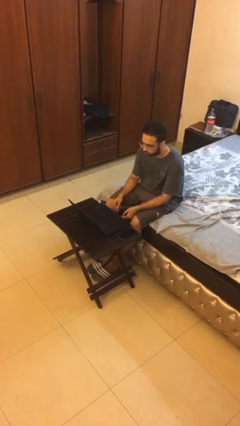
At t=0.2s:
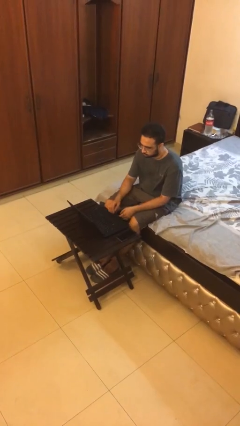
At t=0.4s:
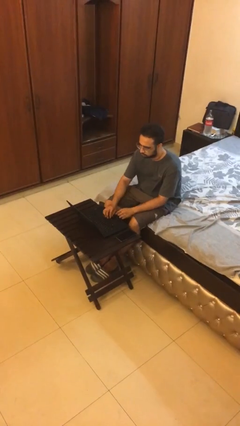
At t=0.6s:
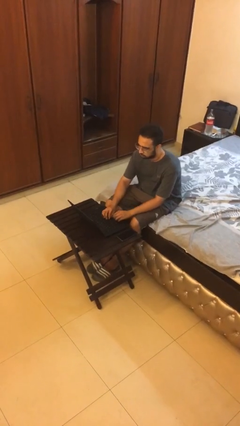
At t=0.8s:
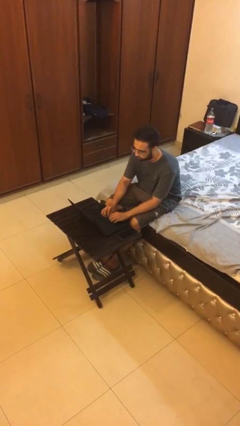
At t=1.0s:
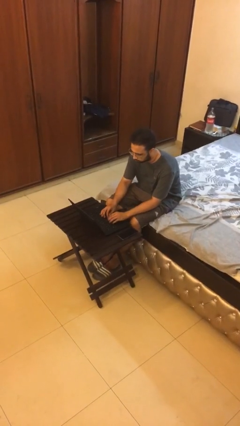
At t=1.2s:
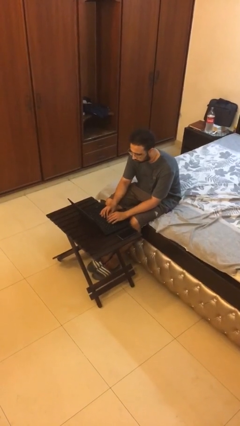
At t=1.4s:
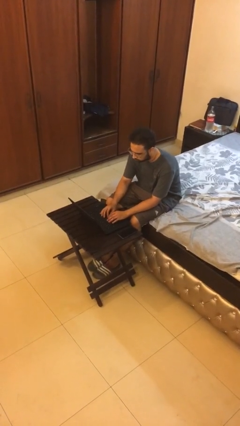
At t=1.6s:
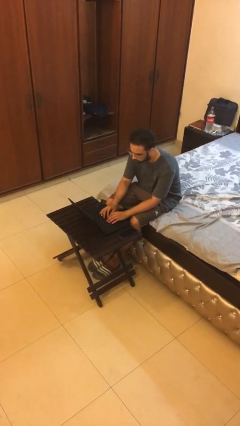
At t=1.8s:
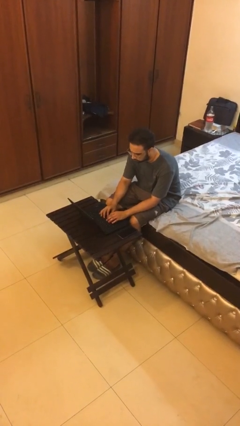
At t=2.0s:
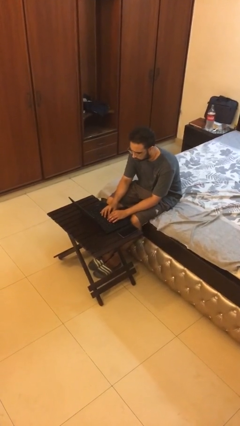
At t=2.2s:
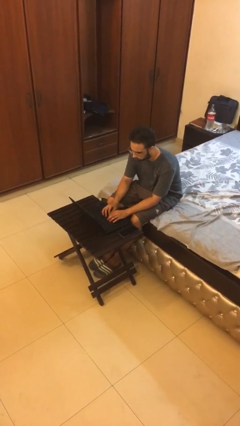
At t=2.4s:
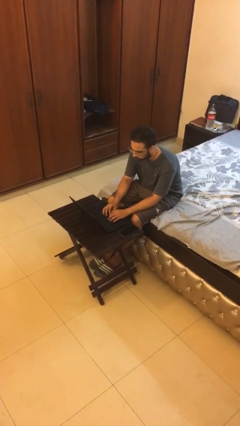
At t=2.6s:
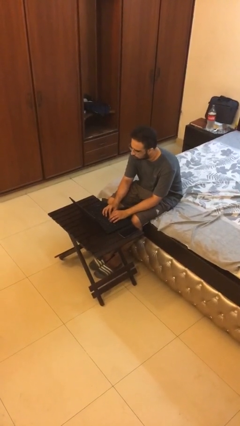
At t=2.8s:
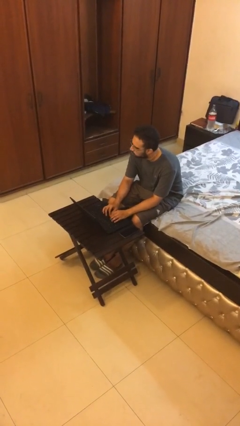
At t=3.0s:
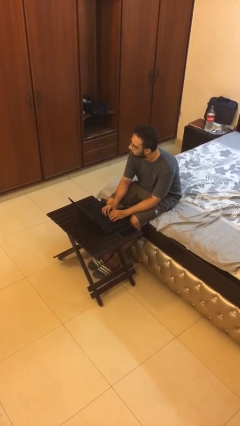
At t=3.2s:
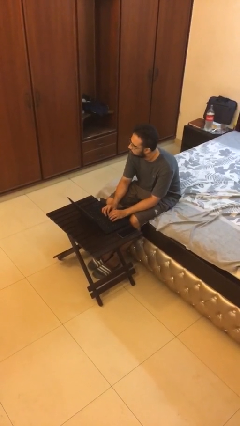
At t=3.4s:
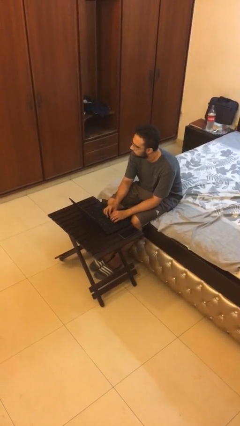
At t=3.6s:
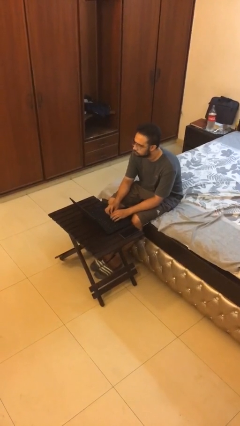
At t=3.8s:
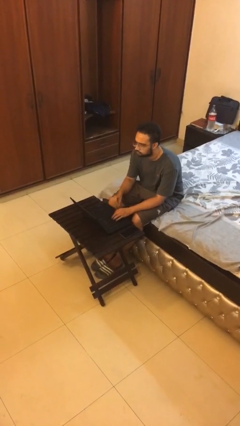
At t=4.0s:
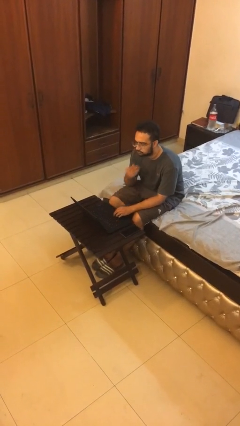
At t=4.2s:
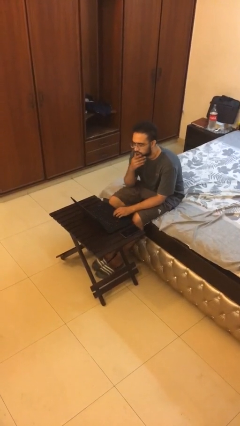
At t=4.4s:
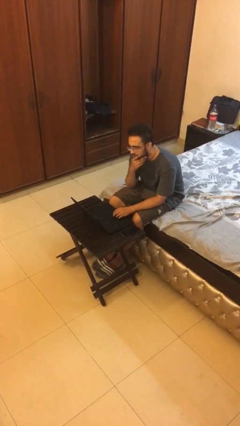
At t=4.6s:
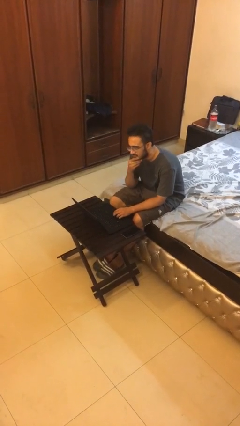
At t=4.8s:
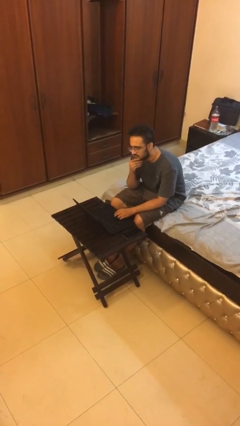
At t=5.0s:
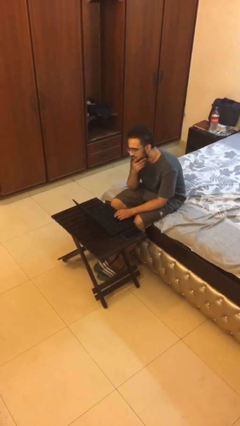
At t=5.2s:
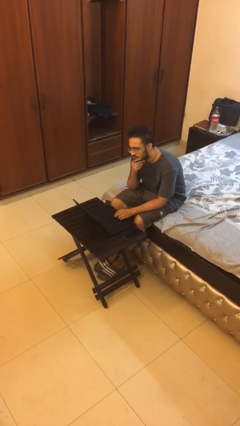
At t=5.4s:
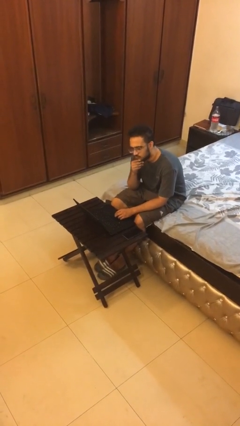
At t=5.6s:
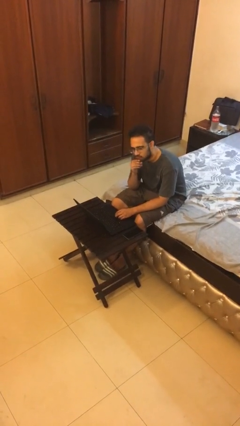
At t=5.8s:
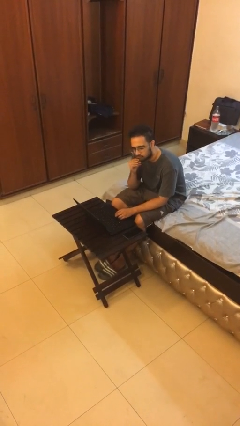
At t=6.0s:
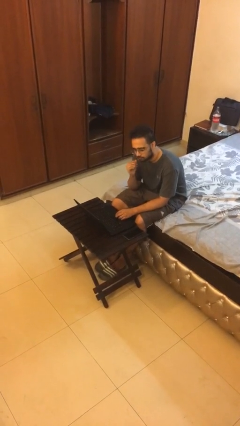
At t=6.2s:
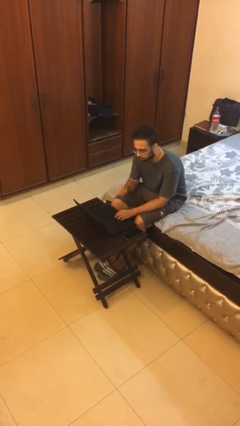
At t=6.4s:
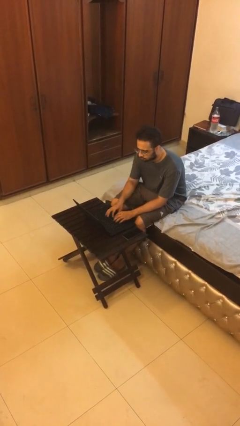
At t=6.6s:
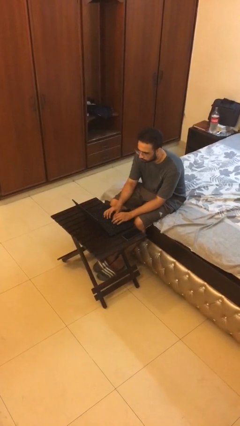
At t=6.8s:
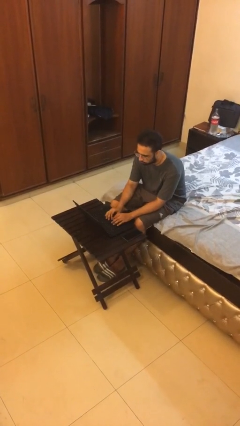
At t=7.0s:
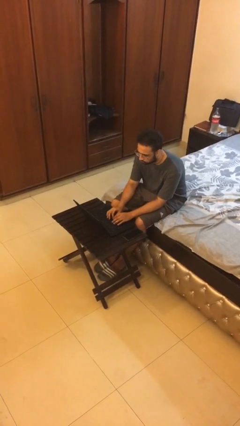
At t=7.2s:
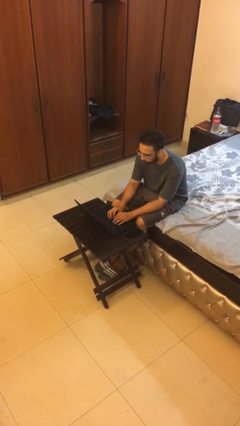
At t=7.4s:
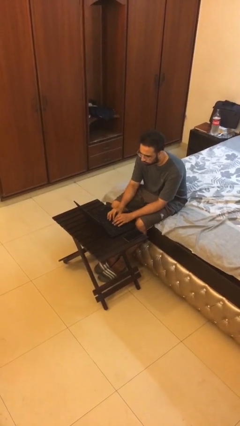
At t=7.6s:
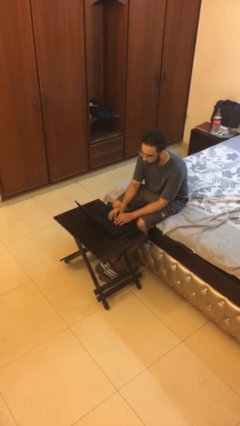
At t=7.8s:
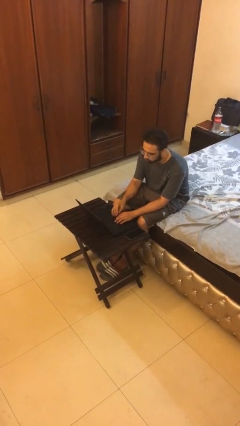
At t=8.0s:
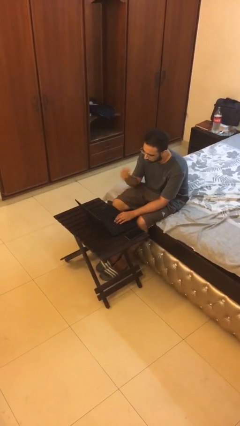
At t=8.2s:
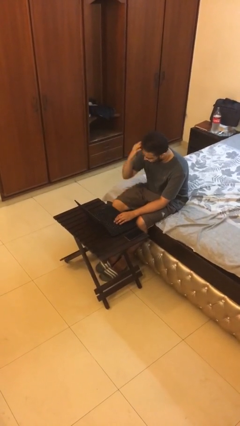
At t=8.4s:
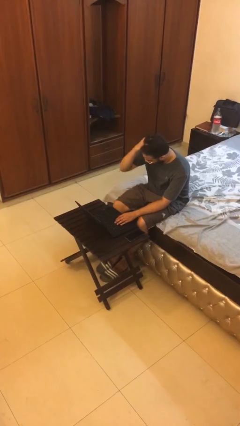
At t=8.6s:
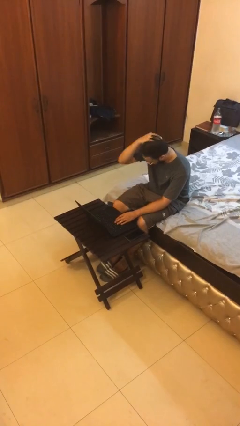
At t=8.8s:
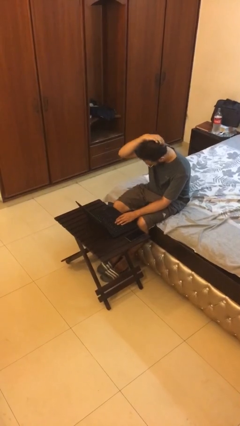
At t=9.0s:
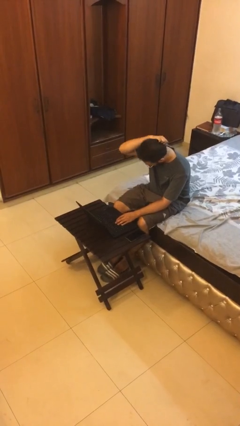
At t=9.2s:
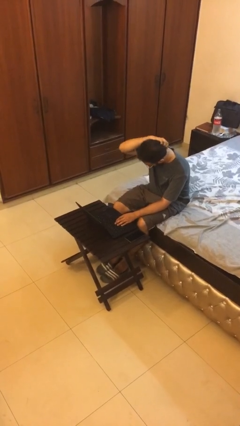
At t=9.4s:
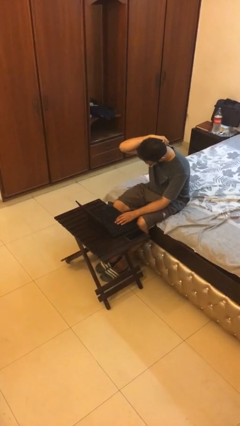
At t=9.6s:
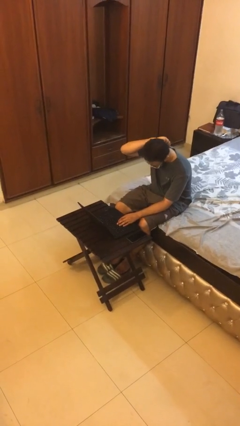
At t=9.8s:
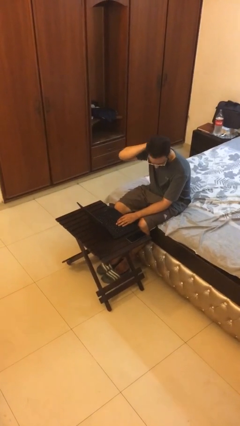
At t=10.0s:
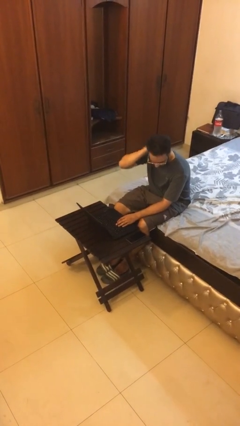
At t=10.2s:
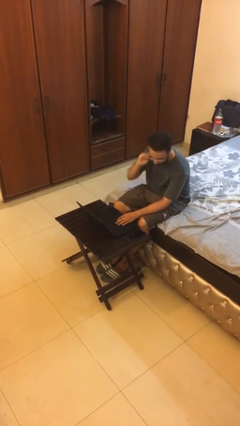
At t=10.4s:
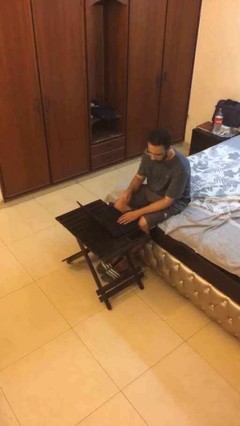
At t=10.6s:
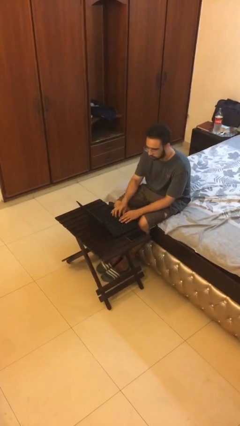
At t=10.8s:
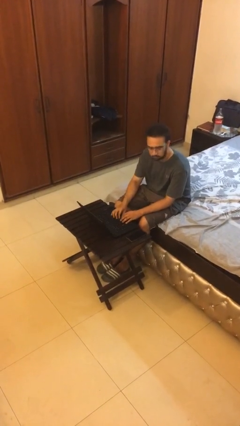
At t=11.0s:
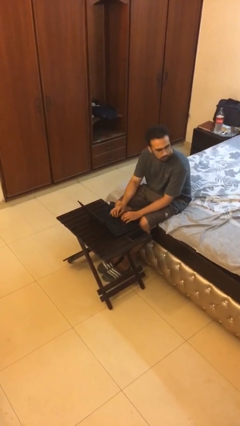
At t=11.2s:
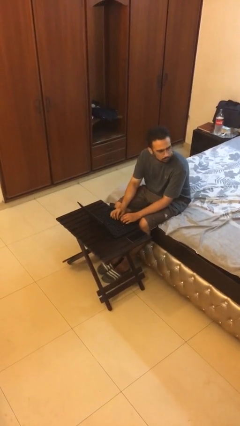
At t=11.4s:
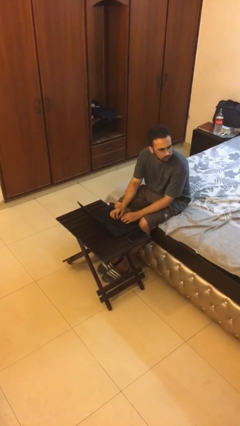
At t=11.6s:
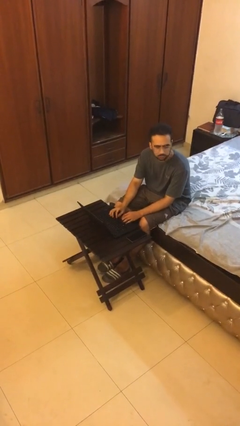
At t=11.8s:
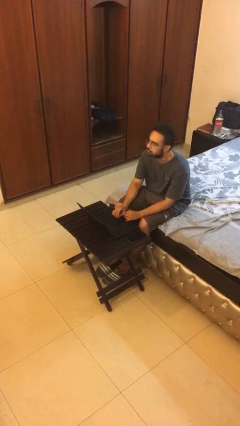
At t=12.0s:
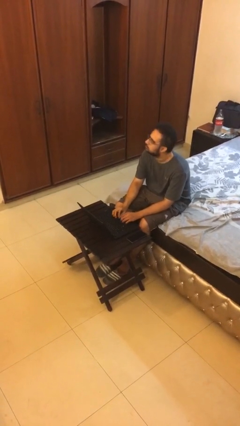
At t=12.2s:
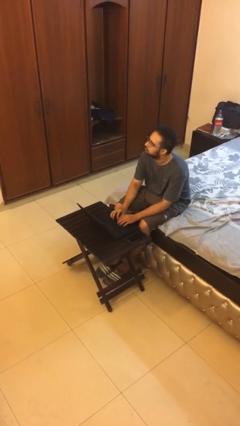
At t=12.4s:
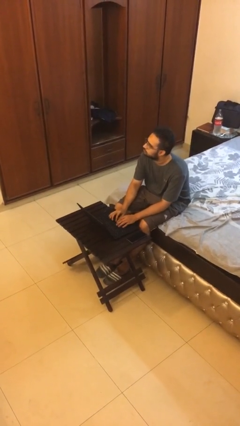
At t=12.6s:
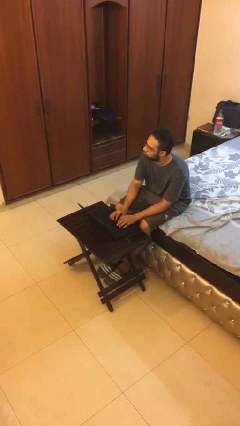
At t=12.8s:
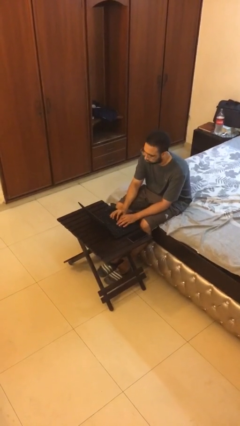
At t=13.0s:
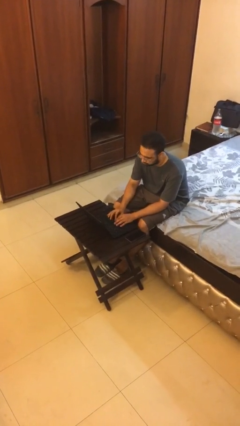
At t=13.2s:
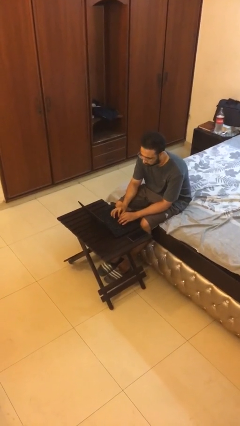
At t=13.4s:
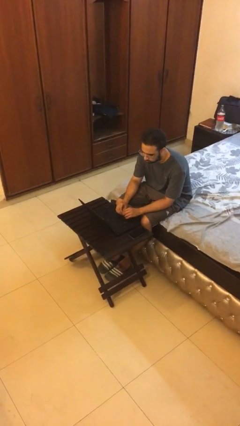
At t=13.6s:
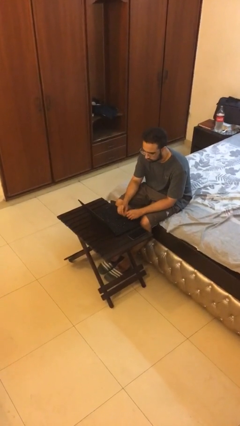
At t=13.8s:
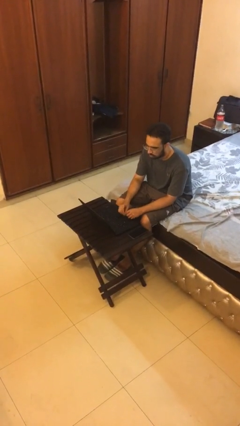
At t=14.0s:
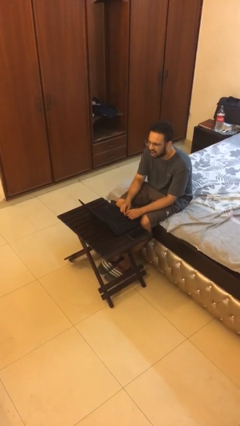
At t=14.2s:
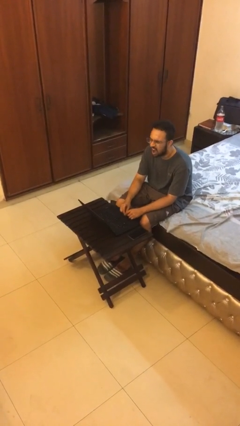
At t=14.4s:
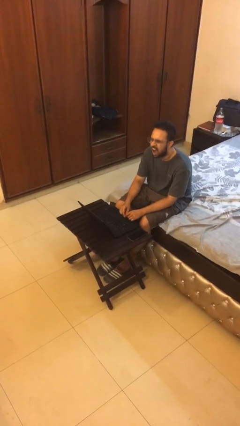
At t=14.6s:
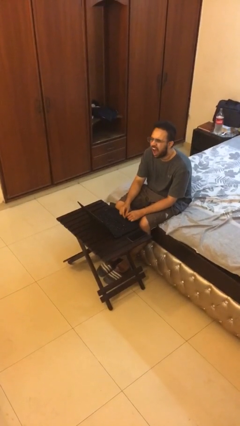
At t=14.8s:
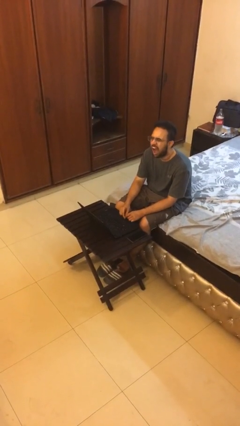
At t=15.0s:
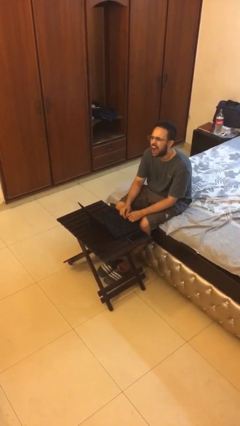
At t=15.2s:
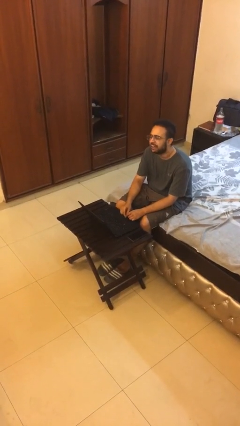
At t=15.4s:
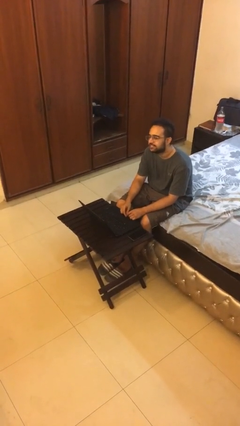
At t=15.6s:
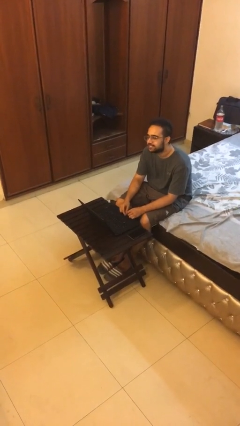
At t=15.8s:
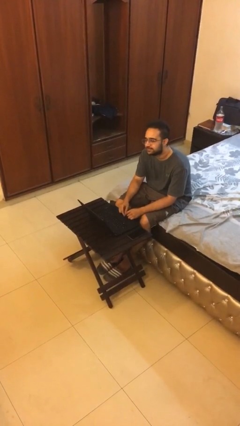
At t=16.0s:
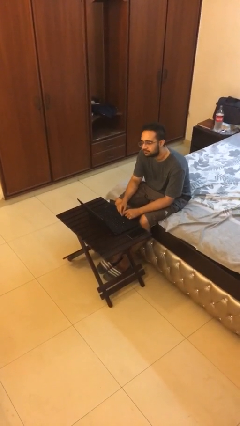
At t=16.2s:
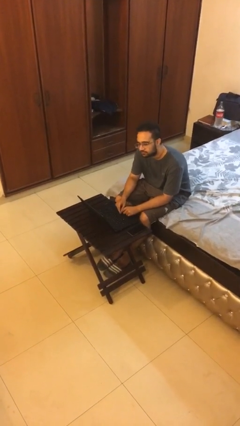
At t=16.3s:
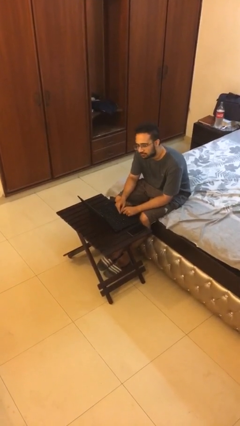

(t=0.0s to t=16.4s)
person interacts with laptop

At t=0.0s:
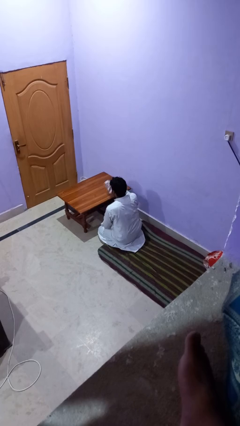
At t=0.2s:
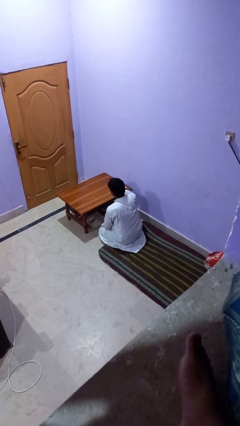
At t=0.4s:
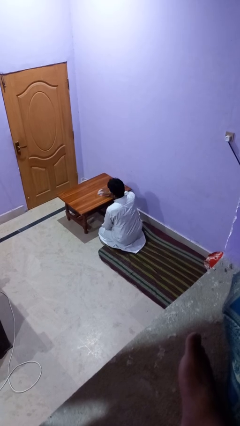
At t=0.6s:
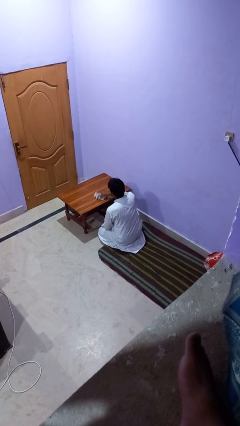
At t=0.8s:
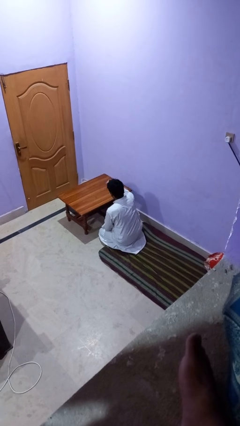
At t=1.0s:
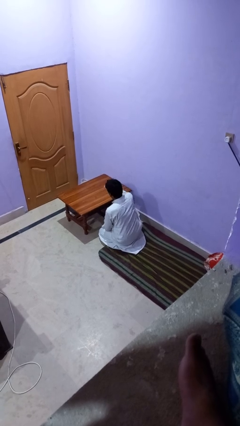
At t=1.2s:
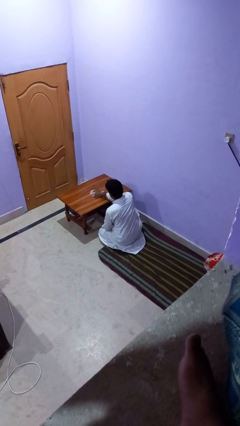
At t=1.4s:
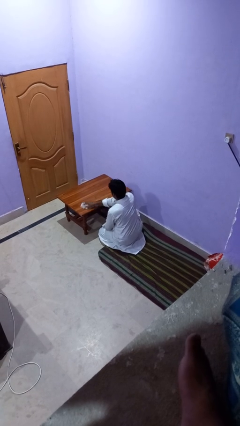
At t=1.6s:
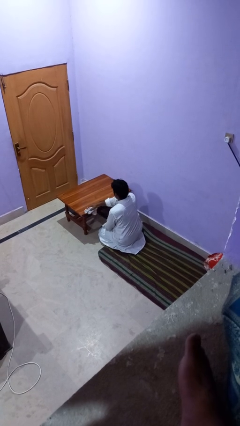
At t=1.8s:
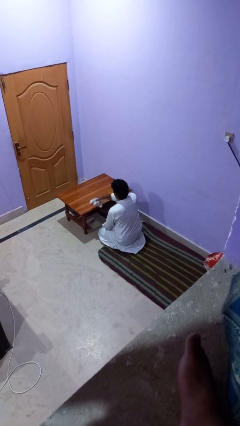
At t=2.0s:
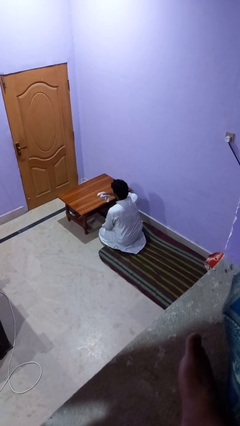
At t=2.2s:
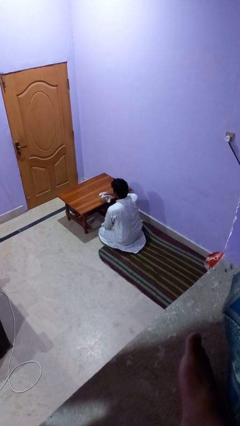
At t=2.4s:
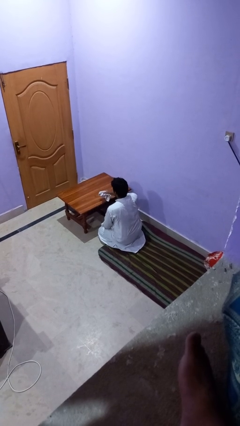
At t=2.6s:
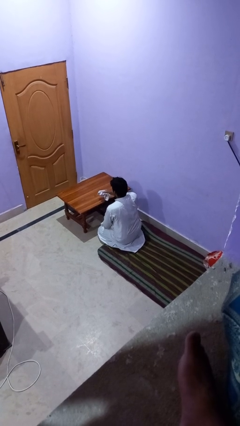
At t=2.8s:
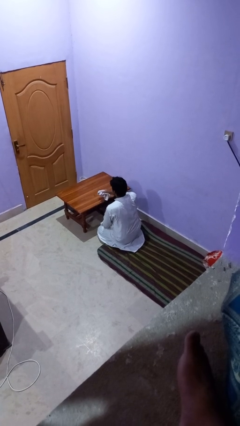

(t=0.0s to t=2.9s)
person cleans table with rag
